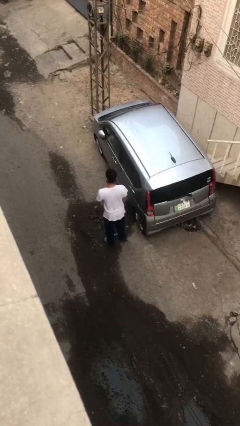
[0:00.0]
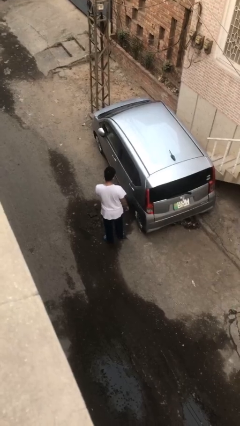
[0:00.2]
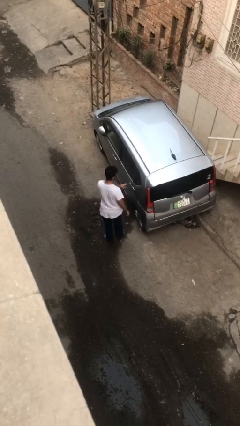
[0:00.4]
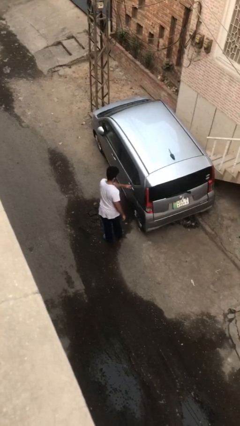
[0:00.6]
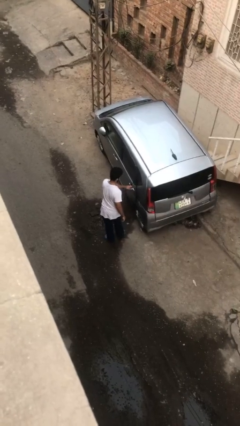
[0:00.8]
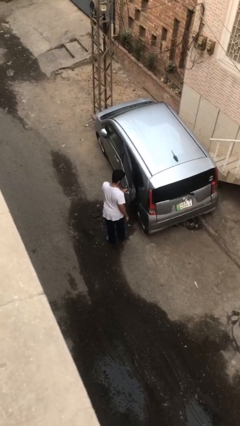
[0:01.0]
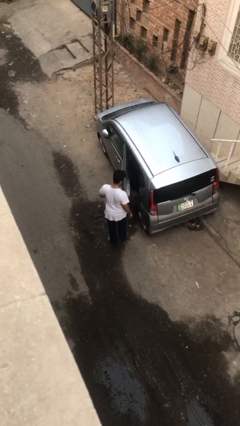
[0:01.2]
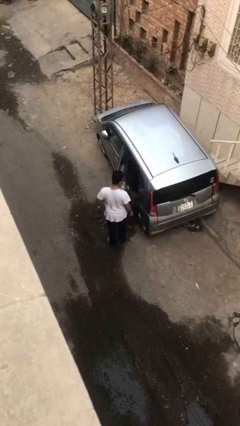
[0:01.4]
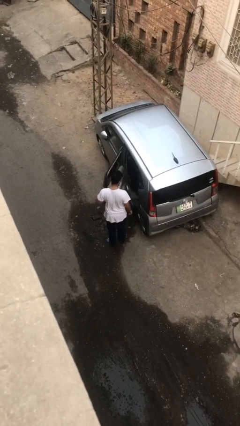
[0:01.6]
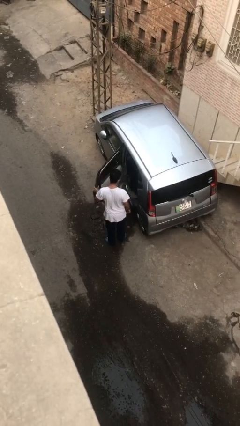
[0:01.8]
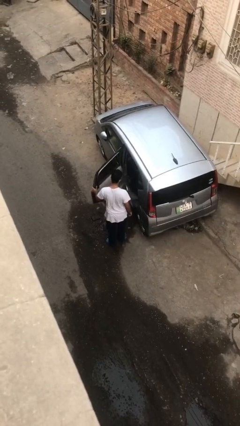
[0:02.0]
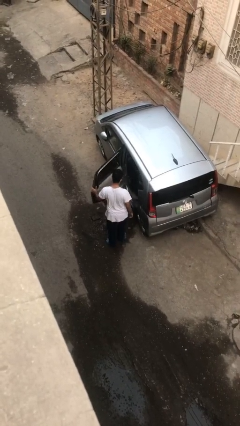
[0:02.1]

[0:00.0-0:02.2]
person opens car door

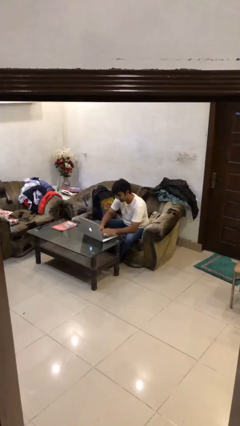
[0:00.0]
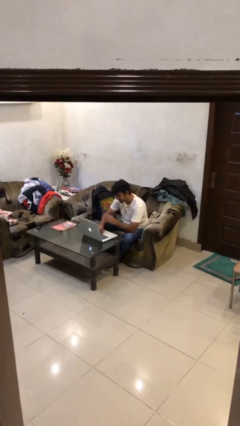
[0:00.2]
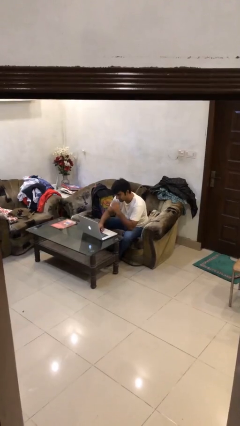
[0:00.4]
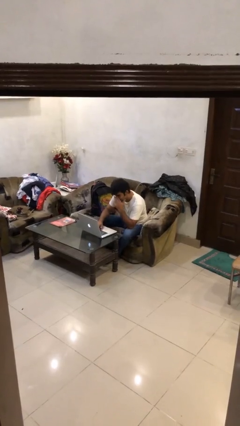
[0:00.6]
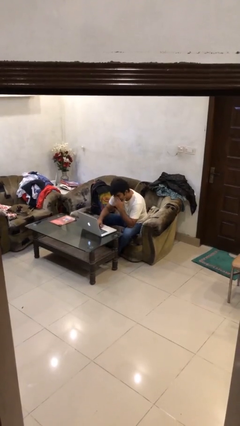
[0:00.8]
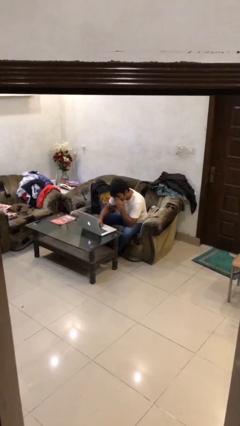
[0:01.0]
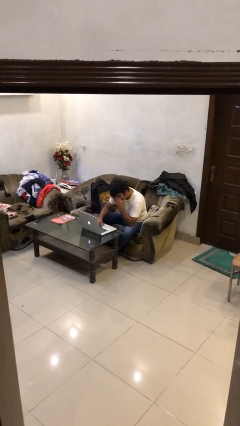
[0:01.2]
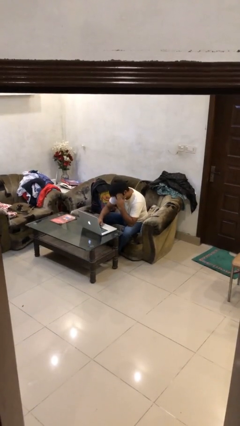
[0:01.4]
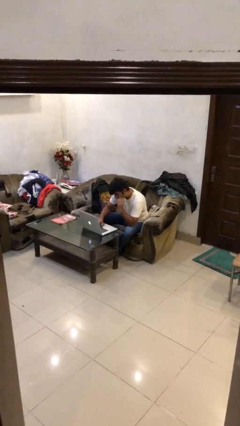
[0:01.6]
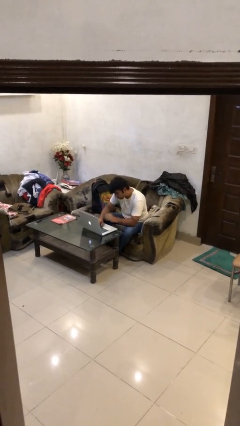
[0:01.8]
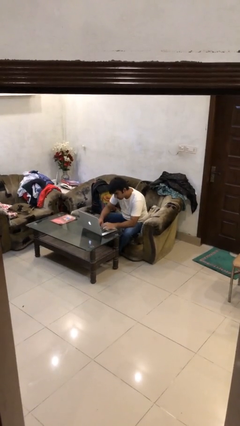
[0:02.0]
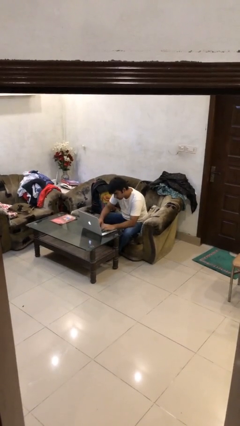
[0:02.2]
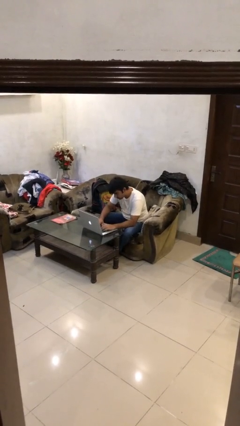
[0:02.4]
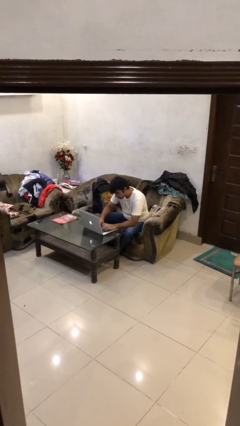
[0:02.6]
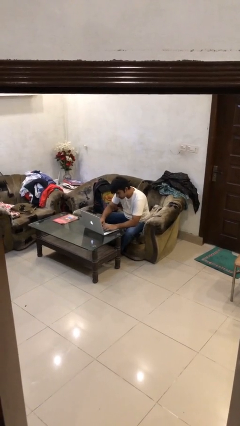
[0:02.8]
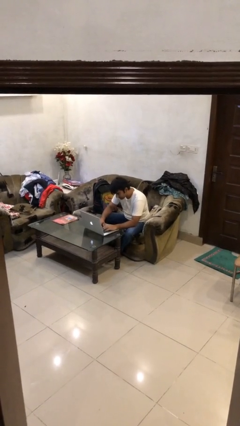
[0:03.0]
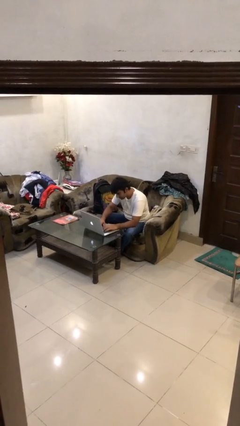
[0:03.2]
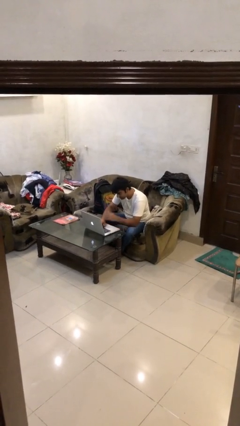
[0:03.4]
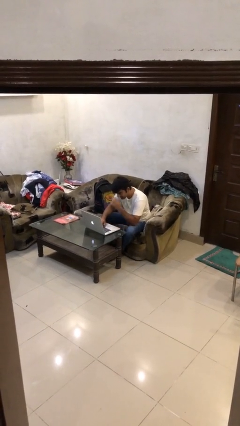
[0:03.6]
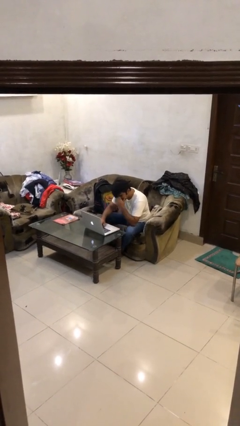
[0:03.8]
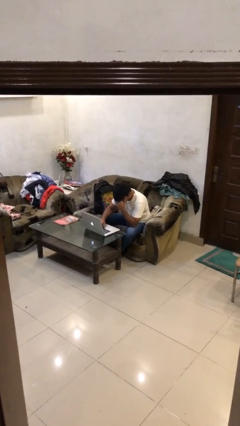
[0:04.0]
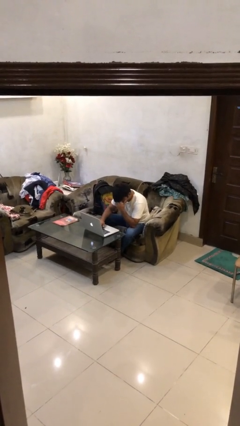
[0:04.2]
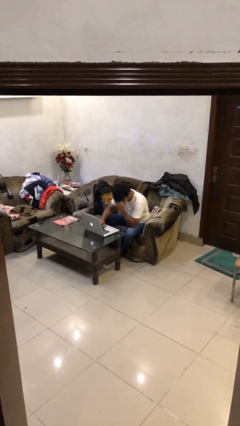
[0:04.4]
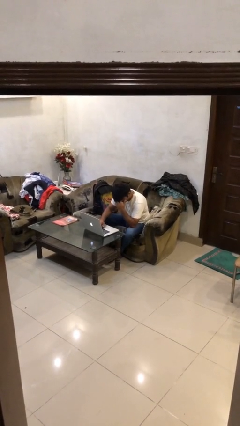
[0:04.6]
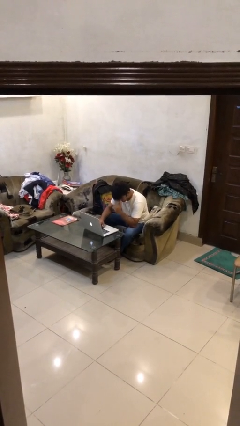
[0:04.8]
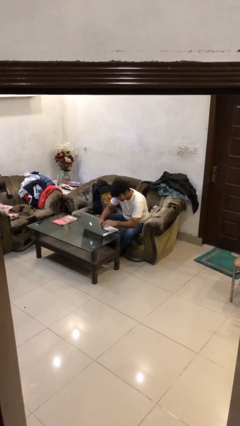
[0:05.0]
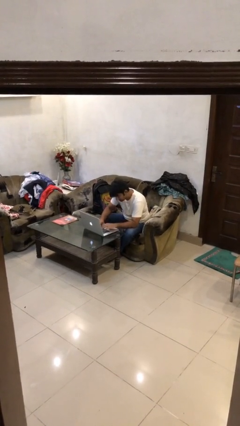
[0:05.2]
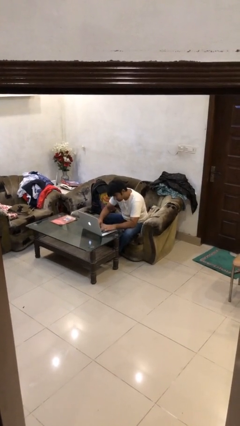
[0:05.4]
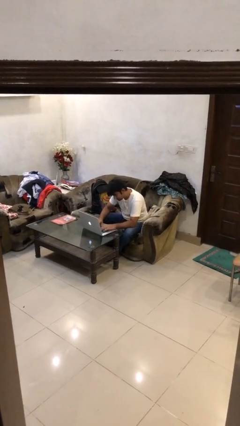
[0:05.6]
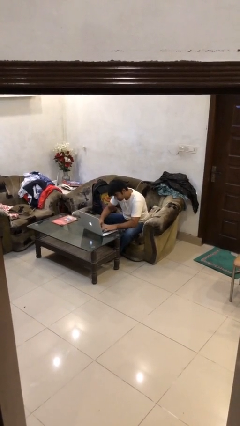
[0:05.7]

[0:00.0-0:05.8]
person interacts with laptop

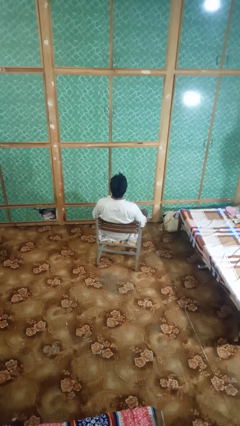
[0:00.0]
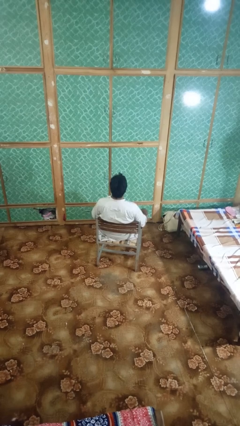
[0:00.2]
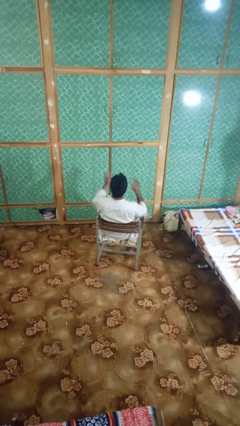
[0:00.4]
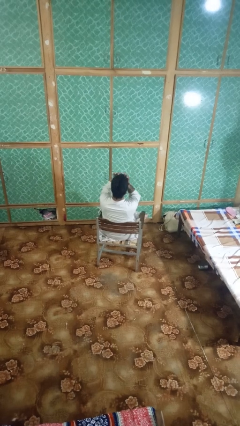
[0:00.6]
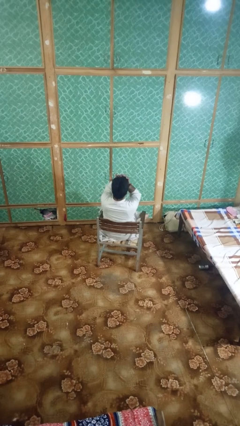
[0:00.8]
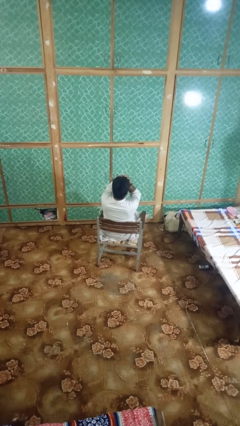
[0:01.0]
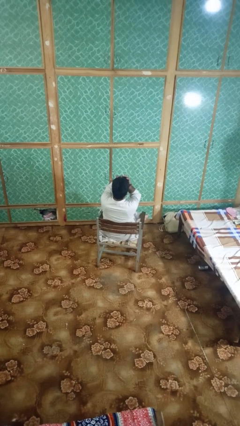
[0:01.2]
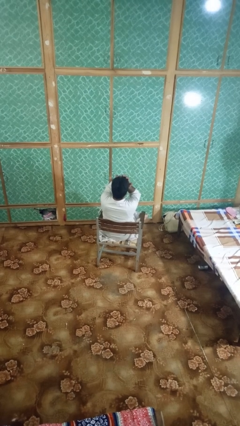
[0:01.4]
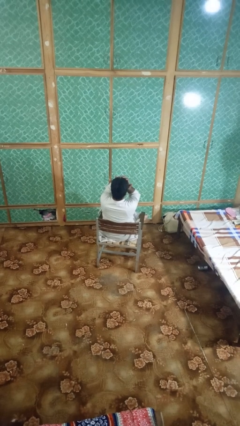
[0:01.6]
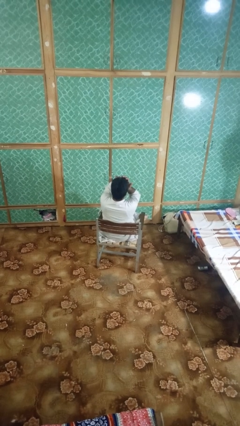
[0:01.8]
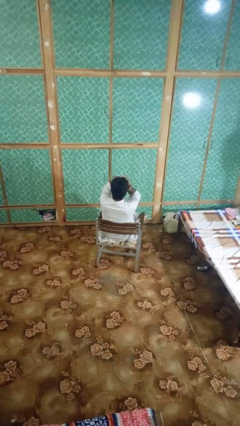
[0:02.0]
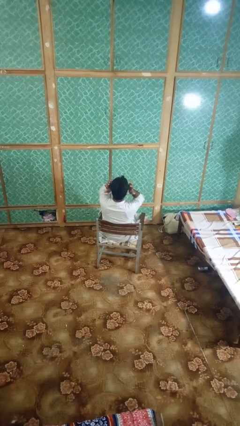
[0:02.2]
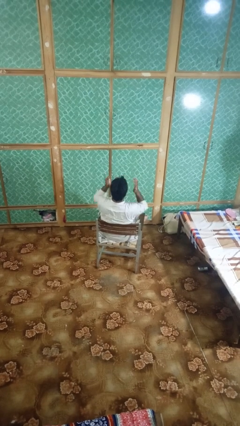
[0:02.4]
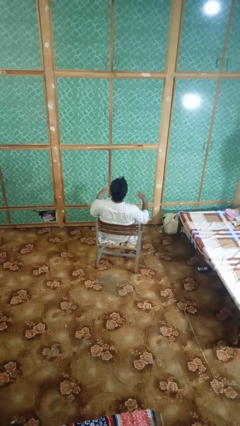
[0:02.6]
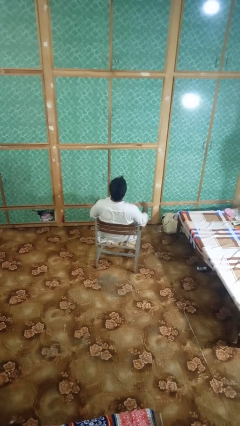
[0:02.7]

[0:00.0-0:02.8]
person rubs eyes

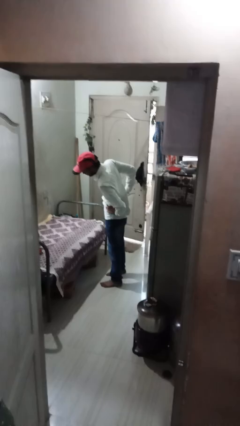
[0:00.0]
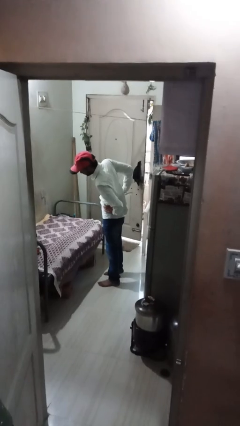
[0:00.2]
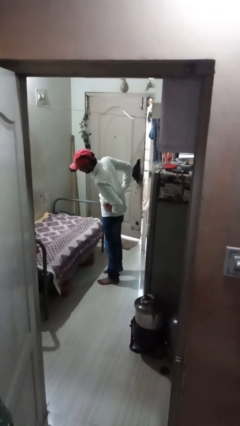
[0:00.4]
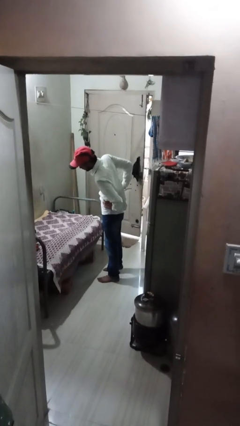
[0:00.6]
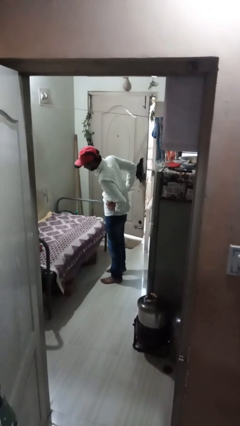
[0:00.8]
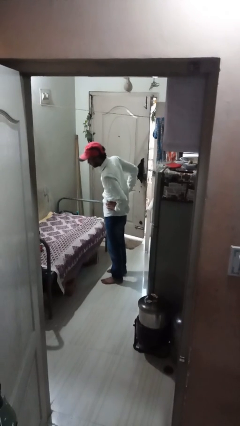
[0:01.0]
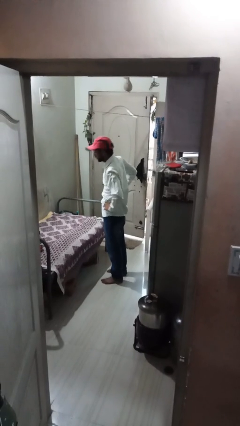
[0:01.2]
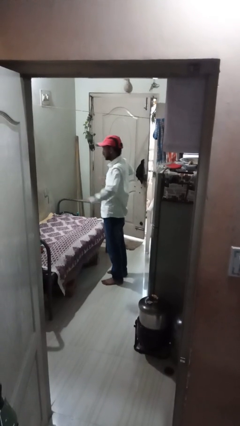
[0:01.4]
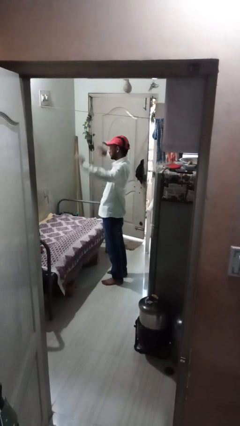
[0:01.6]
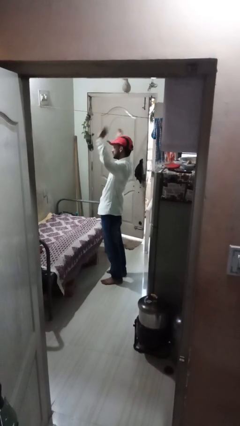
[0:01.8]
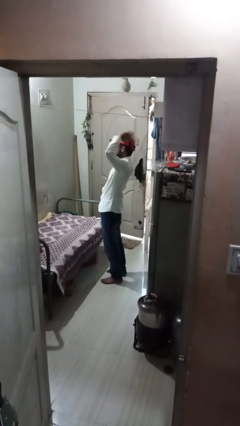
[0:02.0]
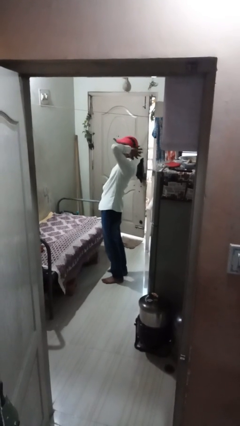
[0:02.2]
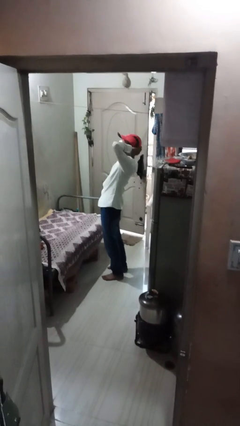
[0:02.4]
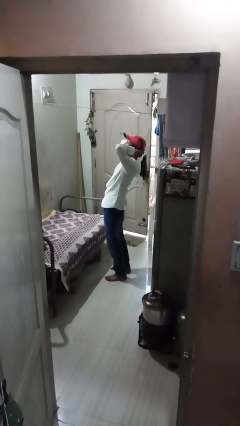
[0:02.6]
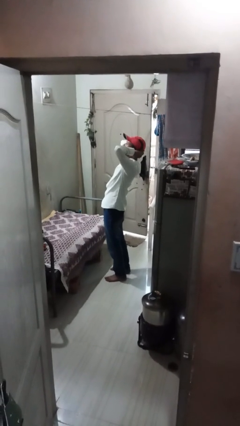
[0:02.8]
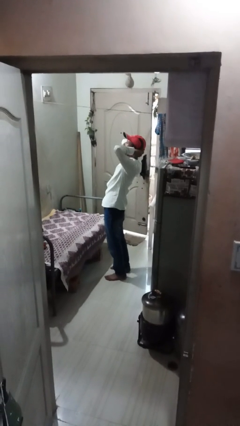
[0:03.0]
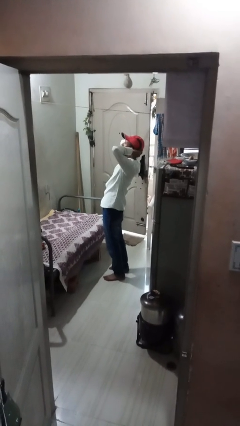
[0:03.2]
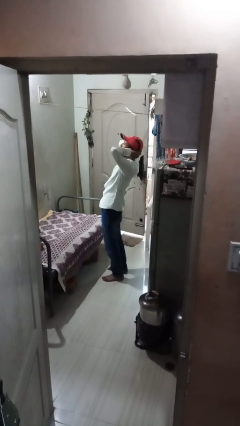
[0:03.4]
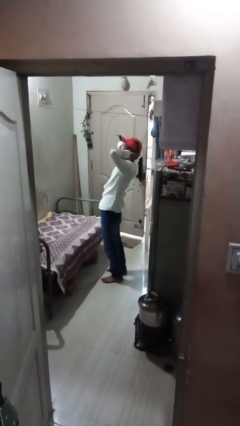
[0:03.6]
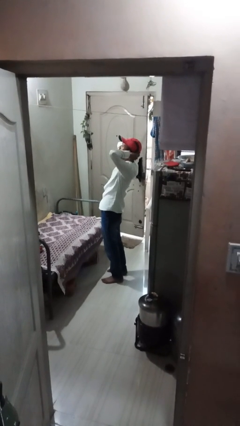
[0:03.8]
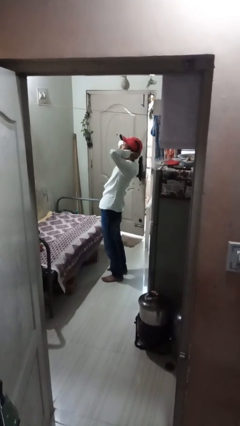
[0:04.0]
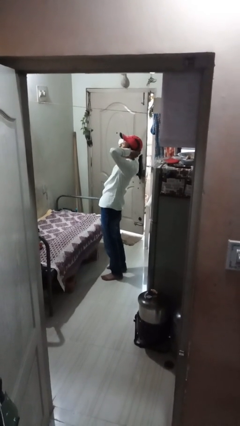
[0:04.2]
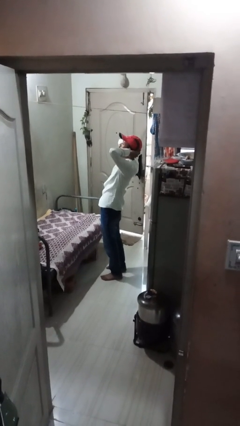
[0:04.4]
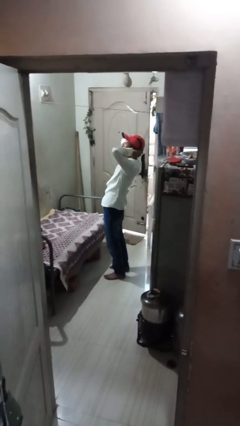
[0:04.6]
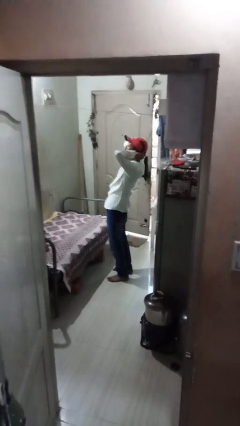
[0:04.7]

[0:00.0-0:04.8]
person stretches arms over head

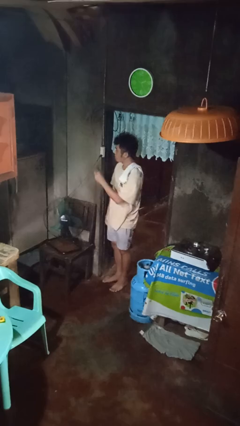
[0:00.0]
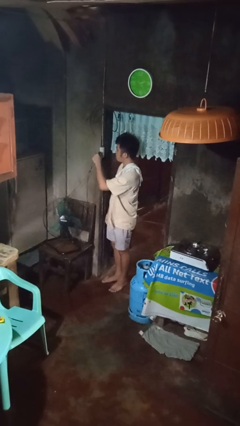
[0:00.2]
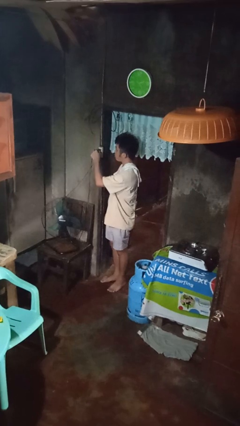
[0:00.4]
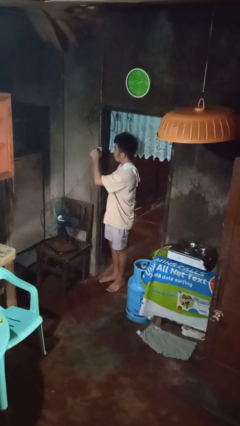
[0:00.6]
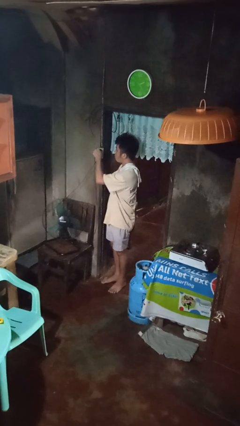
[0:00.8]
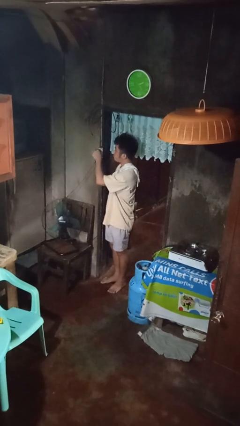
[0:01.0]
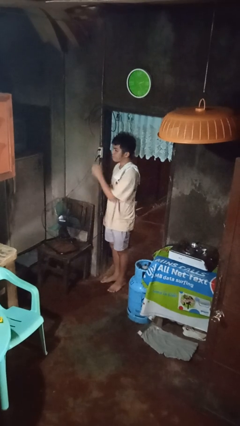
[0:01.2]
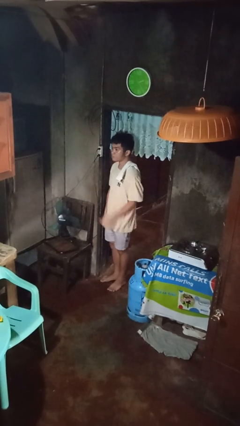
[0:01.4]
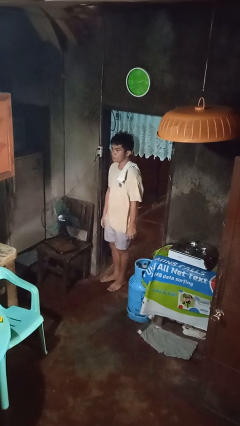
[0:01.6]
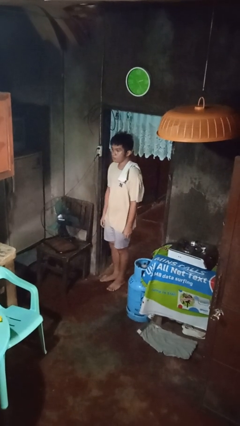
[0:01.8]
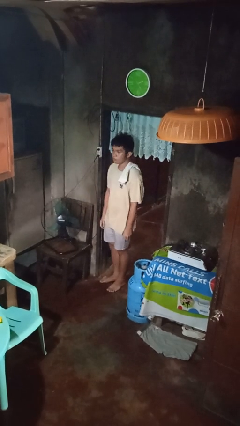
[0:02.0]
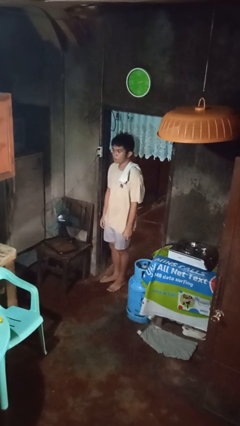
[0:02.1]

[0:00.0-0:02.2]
person plugs into electrical socket
